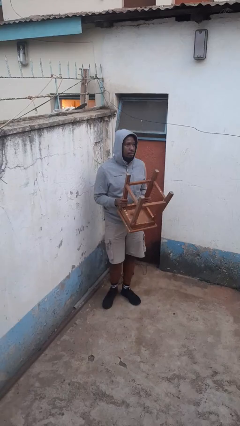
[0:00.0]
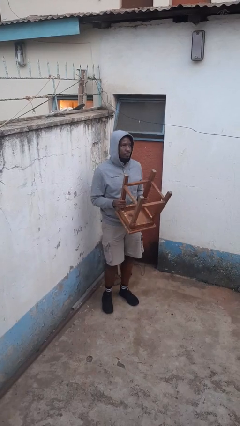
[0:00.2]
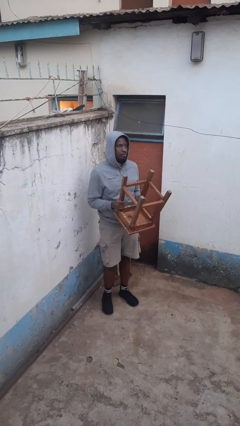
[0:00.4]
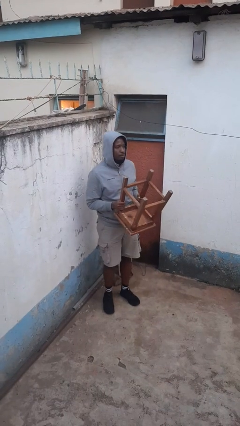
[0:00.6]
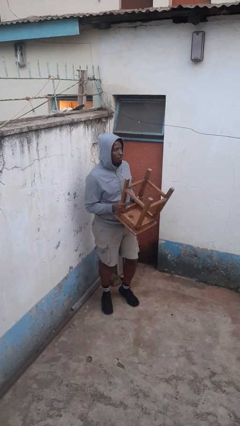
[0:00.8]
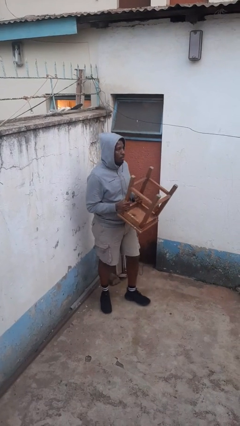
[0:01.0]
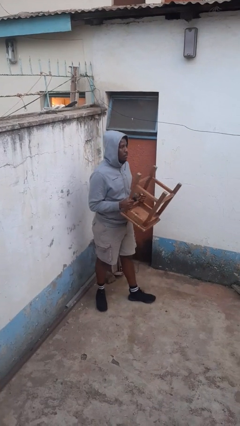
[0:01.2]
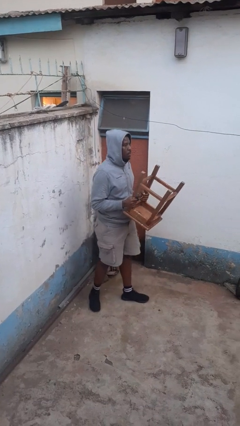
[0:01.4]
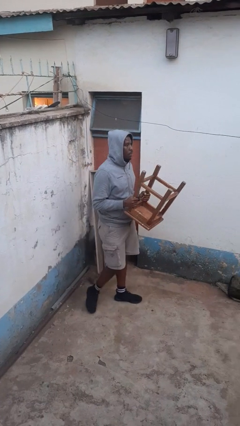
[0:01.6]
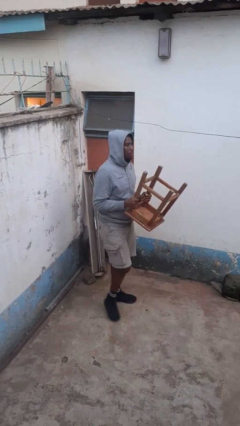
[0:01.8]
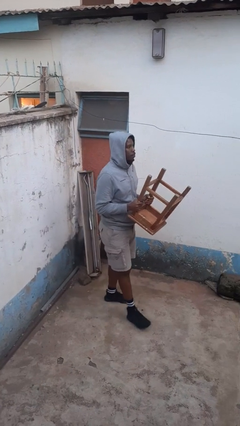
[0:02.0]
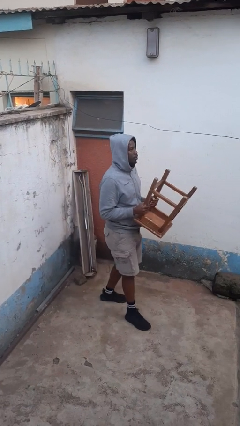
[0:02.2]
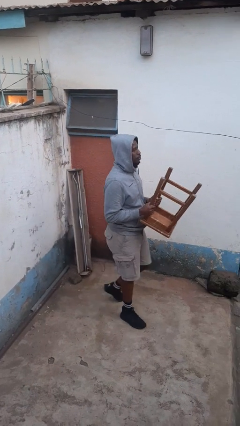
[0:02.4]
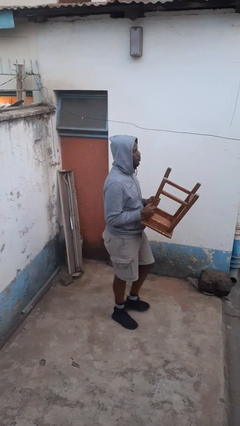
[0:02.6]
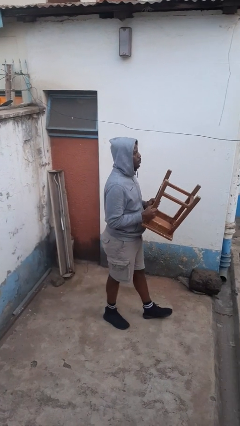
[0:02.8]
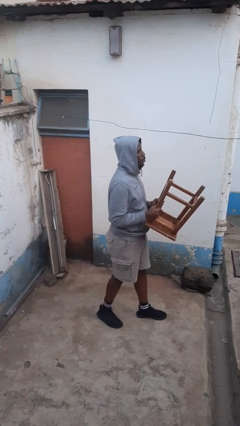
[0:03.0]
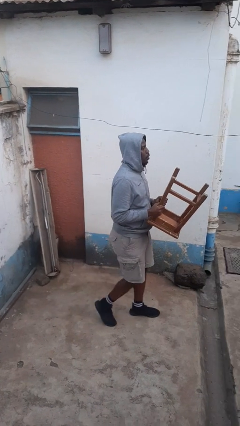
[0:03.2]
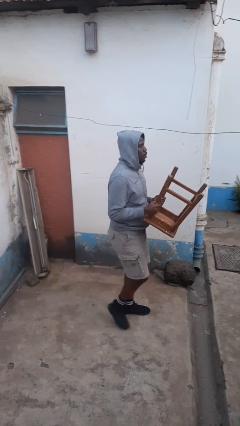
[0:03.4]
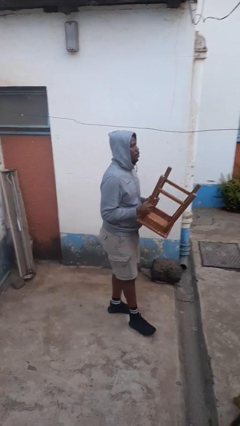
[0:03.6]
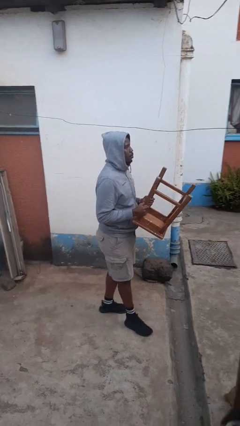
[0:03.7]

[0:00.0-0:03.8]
person carries furniture

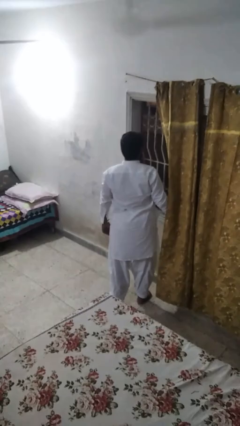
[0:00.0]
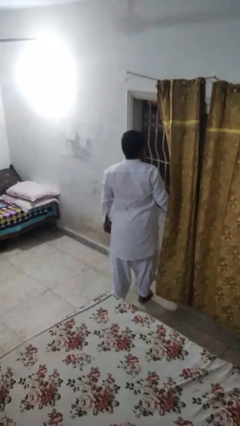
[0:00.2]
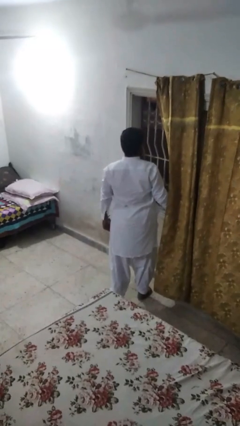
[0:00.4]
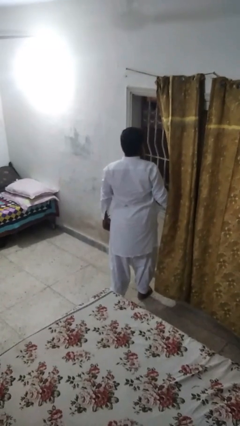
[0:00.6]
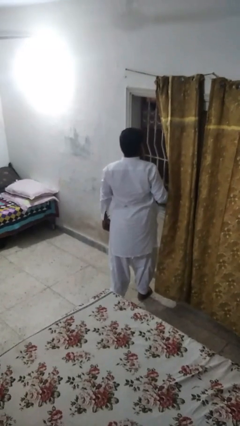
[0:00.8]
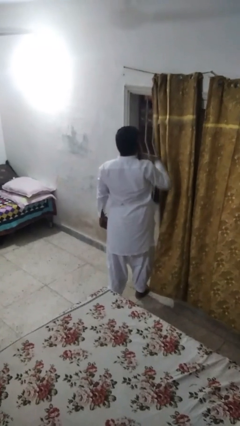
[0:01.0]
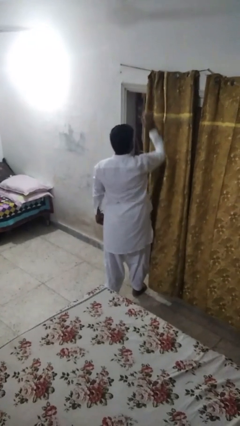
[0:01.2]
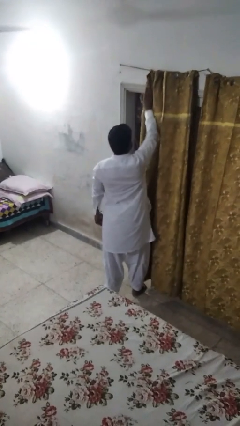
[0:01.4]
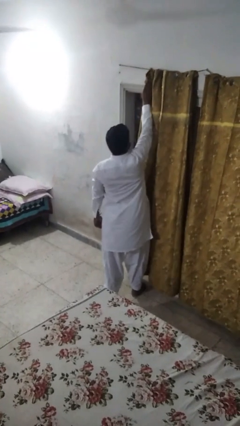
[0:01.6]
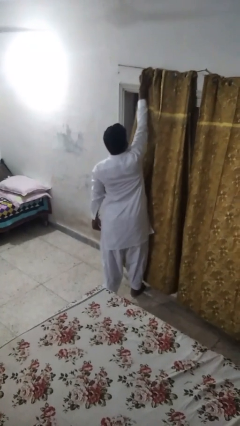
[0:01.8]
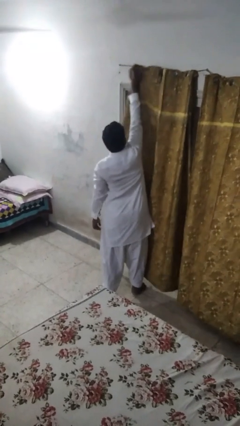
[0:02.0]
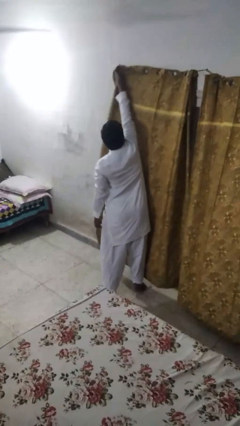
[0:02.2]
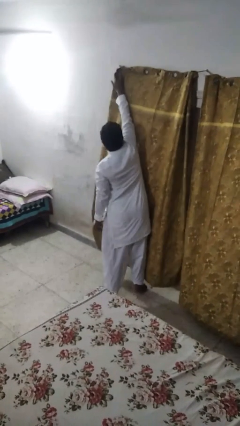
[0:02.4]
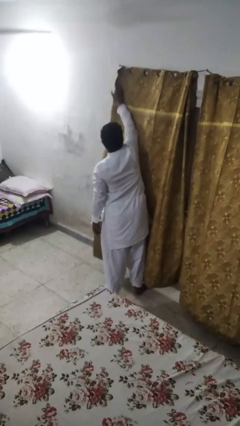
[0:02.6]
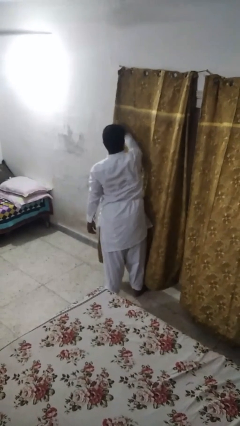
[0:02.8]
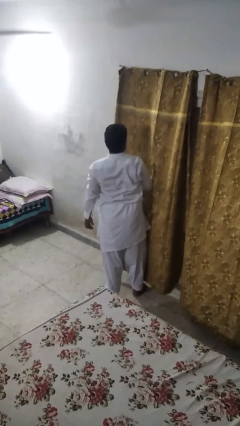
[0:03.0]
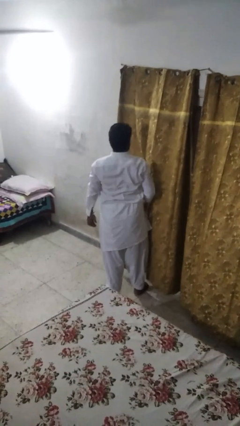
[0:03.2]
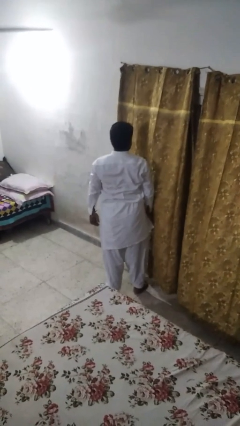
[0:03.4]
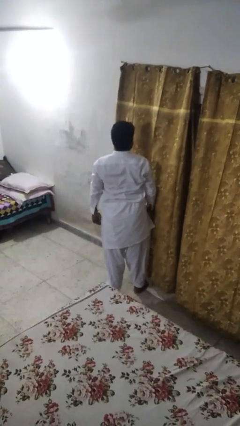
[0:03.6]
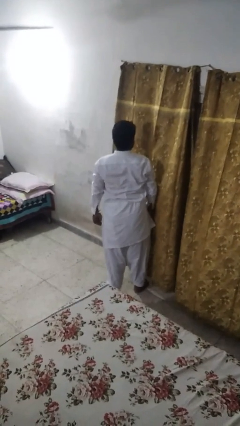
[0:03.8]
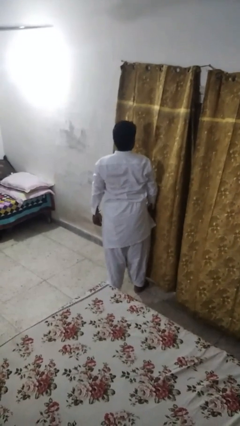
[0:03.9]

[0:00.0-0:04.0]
person closes curtains

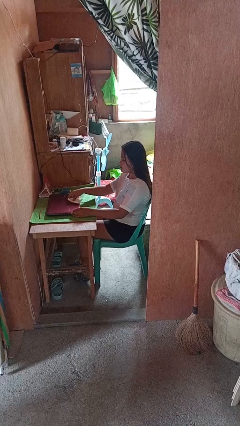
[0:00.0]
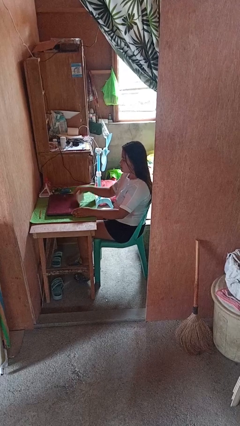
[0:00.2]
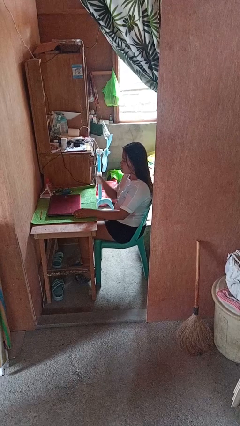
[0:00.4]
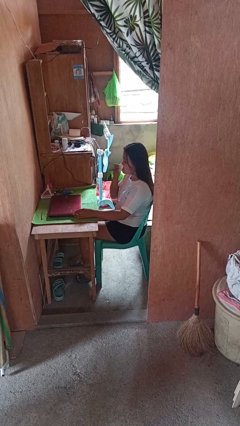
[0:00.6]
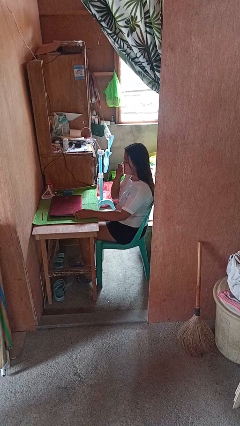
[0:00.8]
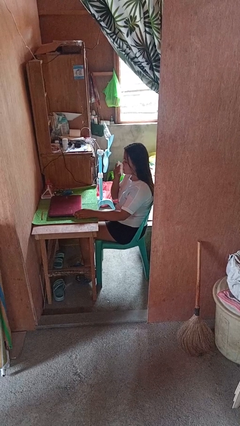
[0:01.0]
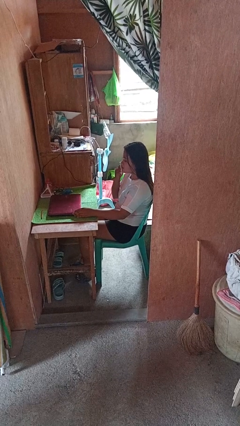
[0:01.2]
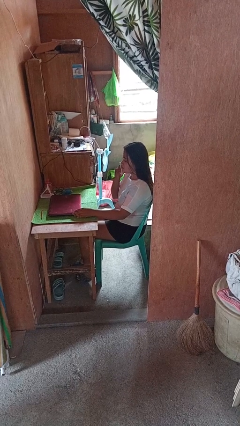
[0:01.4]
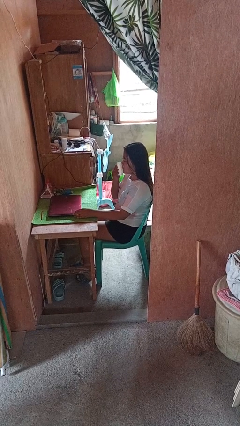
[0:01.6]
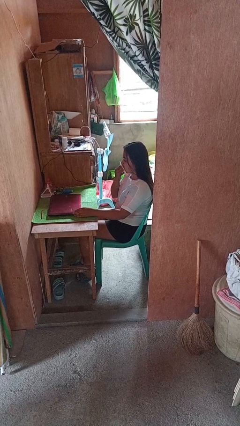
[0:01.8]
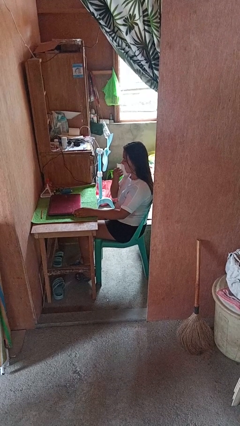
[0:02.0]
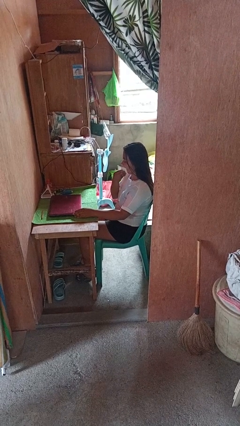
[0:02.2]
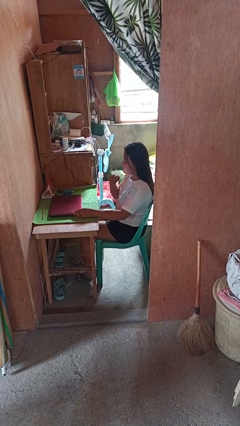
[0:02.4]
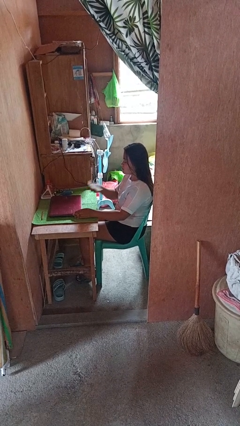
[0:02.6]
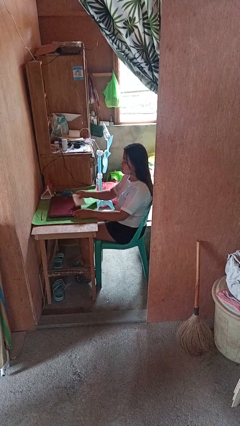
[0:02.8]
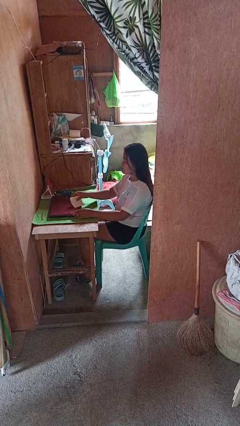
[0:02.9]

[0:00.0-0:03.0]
person wipes mouth with napkin

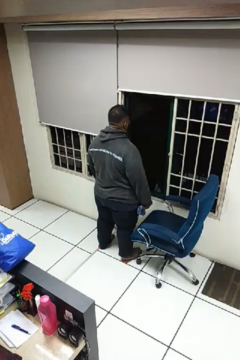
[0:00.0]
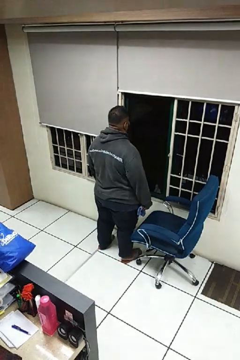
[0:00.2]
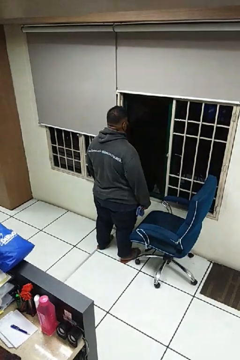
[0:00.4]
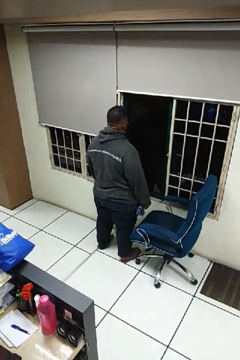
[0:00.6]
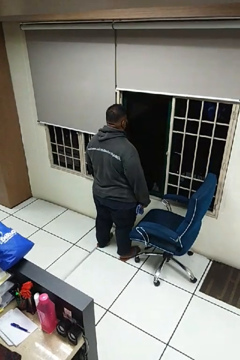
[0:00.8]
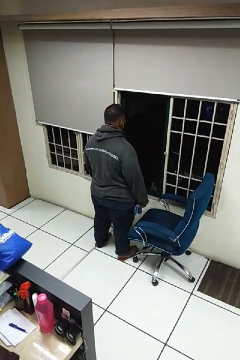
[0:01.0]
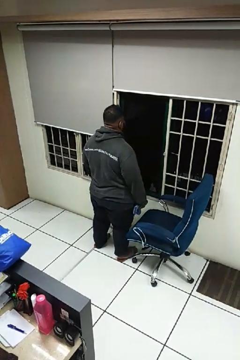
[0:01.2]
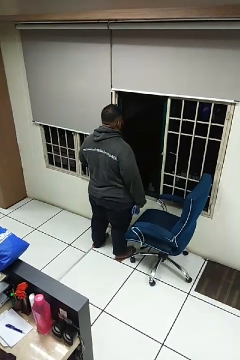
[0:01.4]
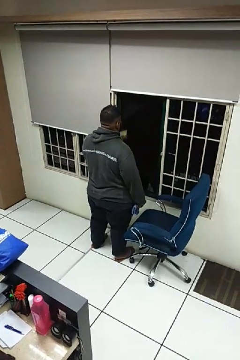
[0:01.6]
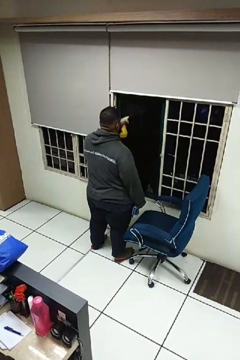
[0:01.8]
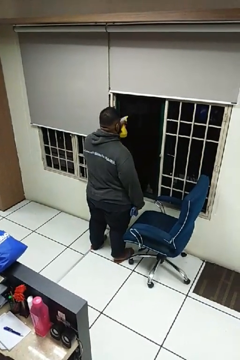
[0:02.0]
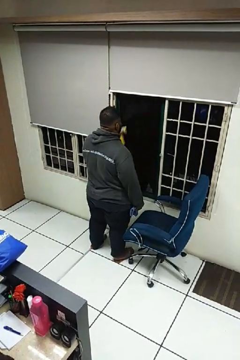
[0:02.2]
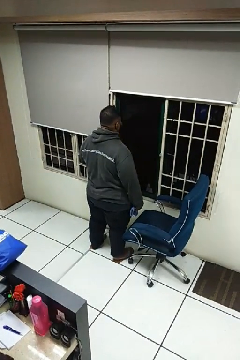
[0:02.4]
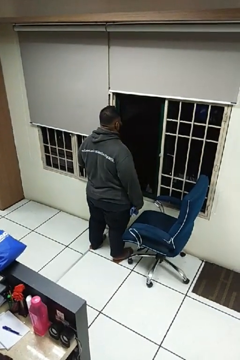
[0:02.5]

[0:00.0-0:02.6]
person sprays from bottle

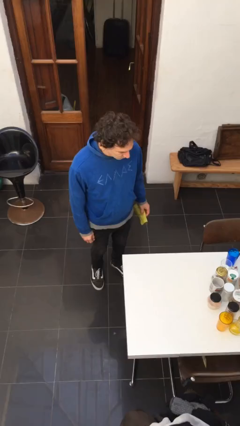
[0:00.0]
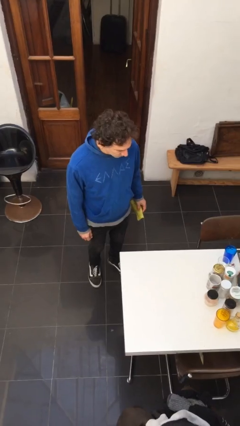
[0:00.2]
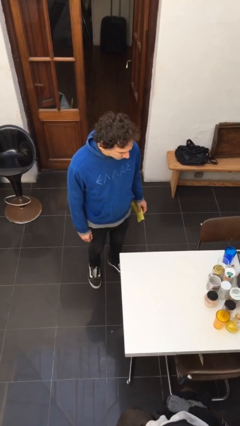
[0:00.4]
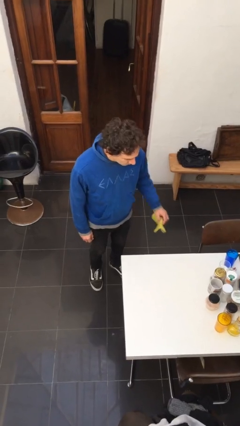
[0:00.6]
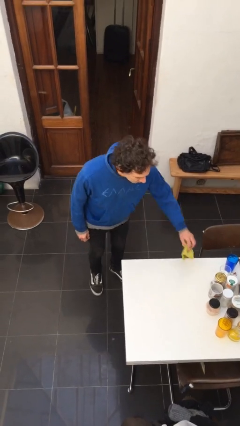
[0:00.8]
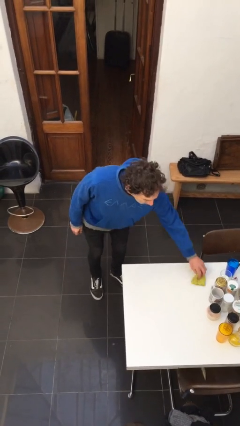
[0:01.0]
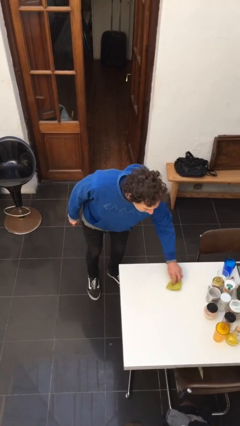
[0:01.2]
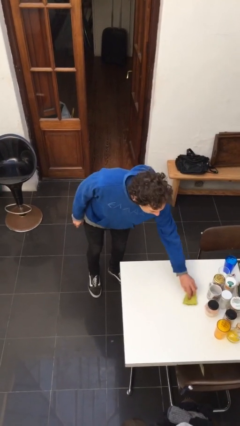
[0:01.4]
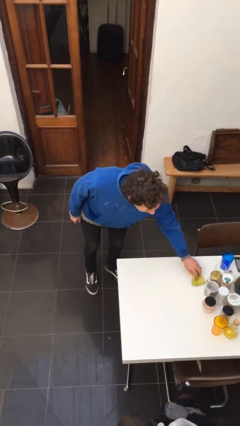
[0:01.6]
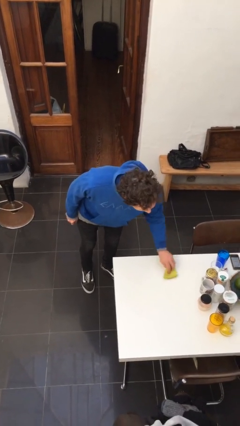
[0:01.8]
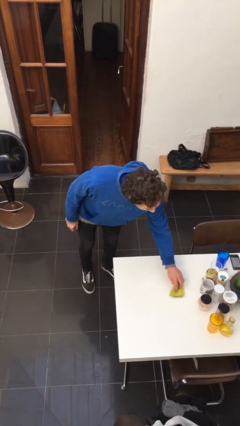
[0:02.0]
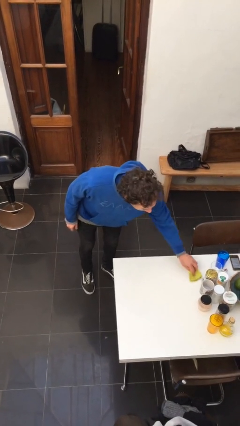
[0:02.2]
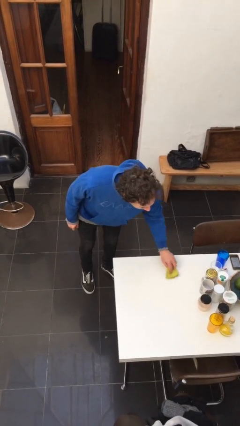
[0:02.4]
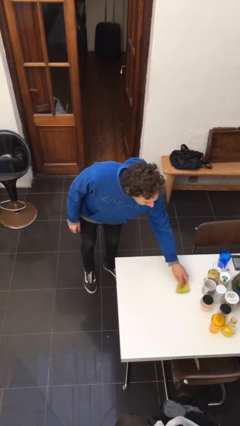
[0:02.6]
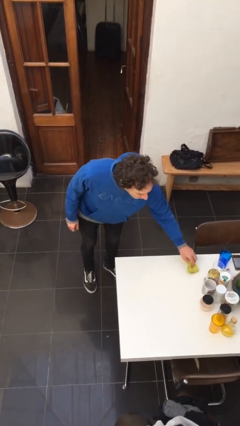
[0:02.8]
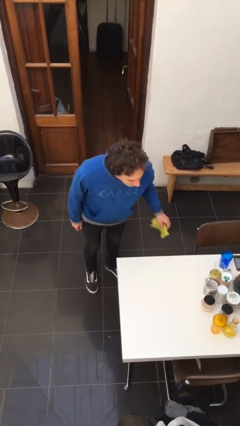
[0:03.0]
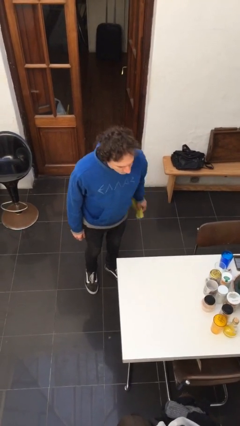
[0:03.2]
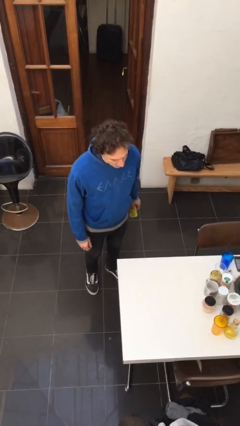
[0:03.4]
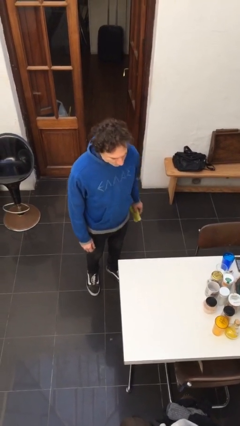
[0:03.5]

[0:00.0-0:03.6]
person cleans table with rag

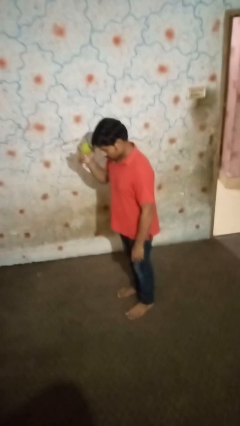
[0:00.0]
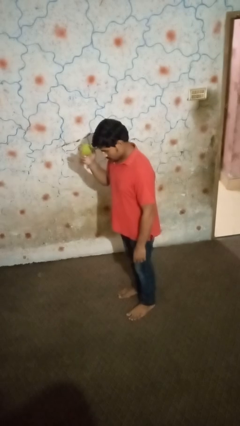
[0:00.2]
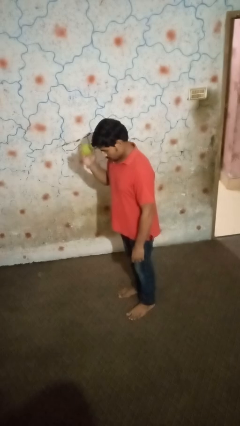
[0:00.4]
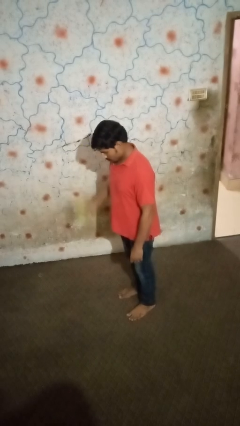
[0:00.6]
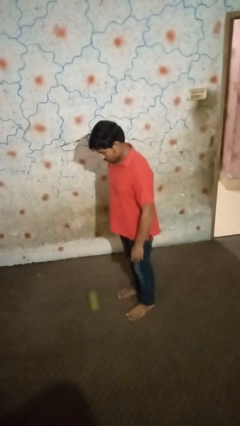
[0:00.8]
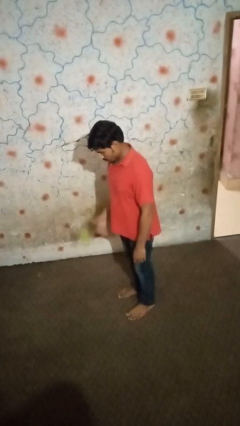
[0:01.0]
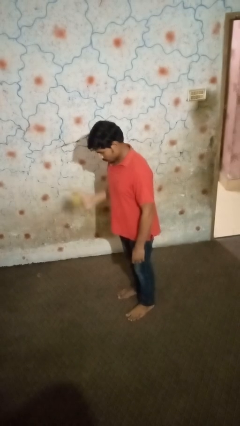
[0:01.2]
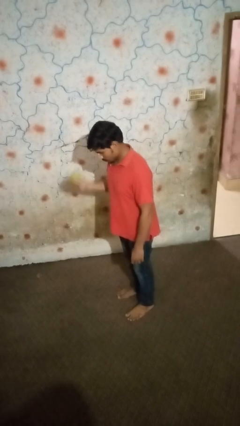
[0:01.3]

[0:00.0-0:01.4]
person bounces ball on floor
